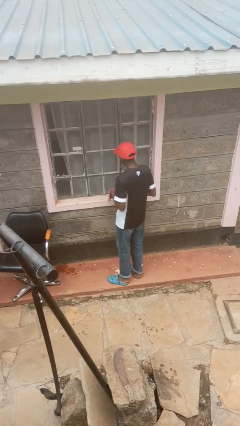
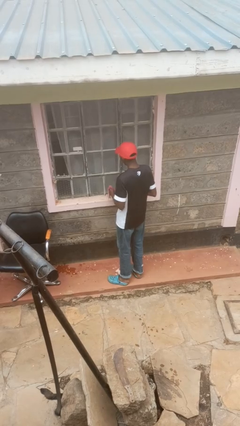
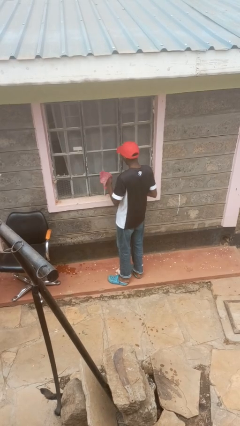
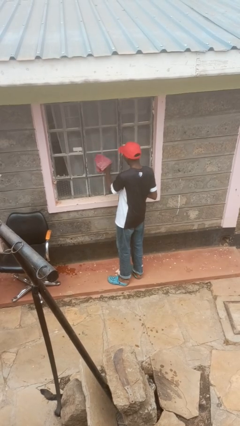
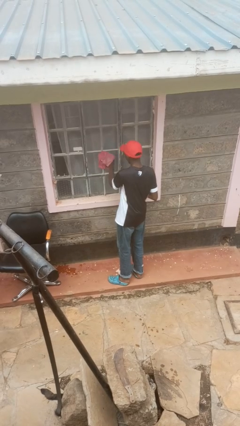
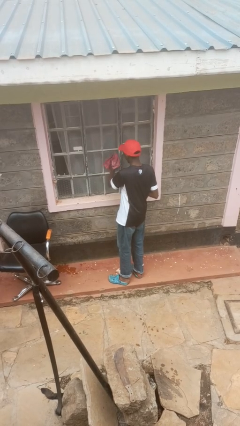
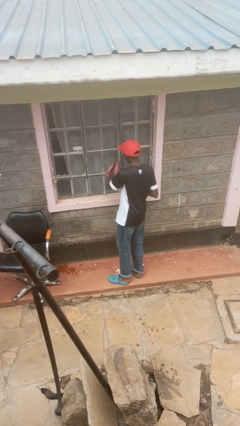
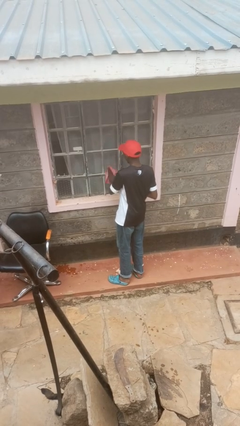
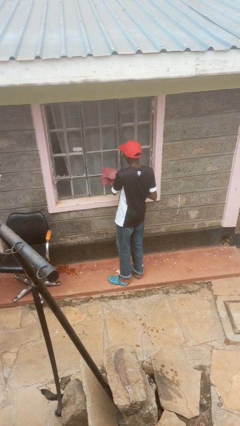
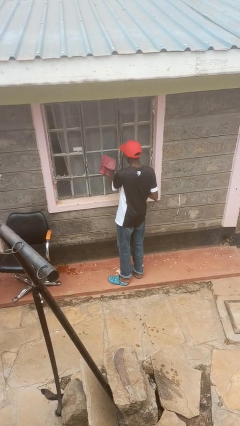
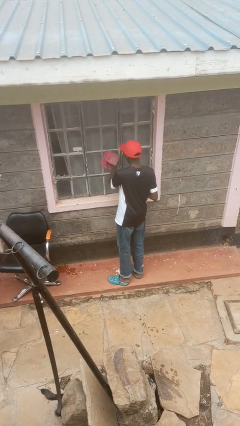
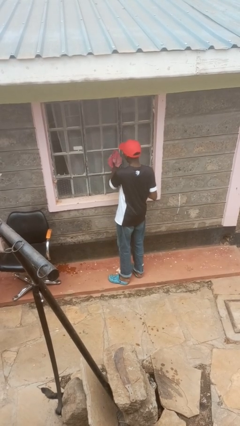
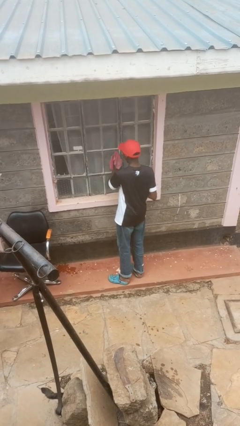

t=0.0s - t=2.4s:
person washes window

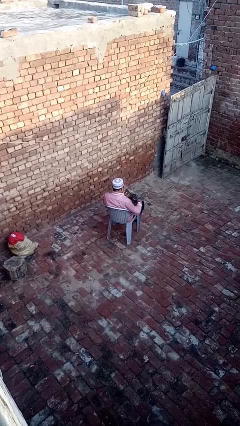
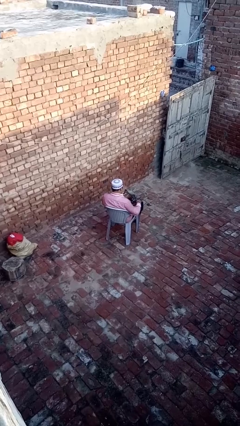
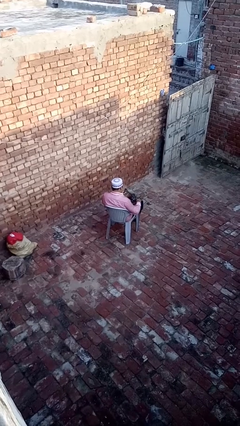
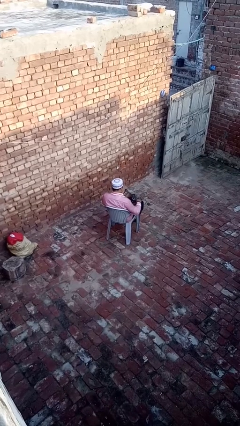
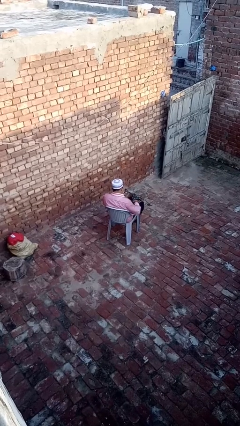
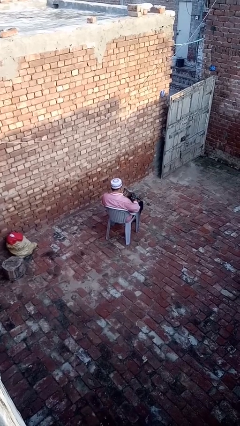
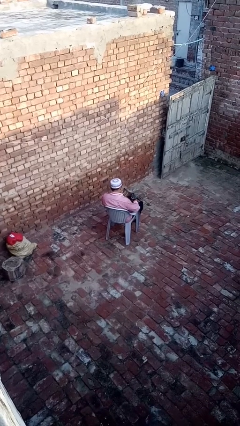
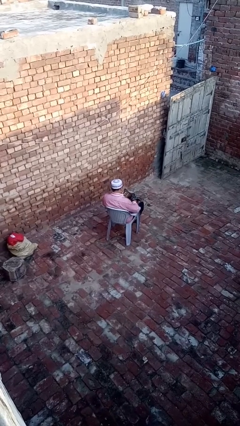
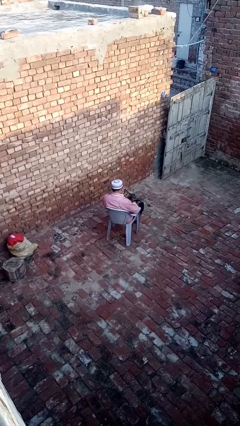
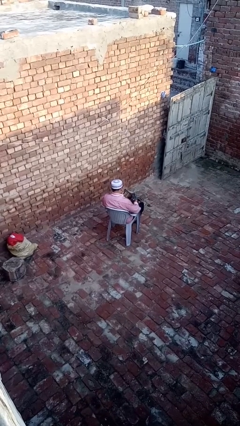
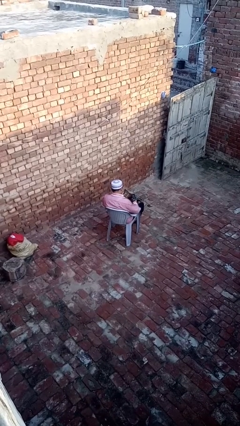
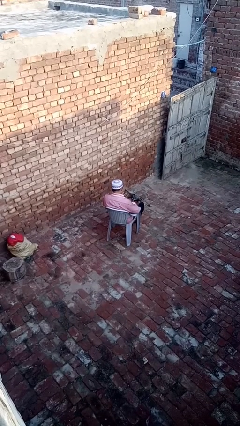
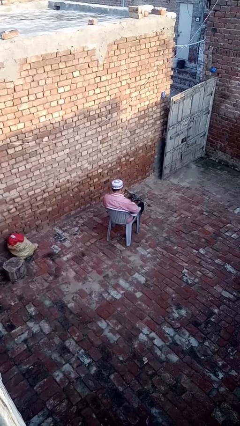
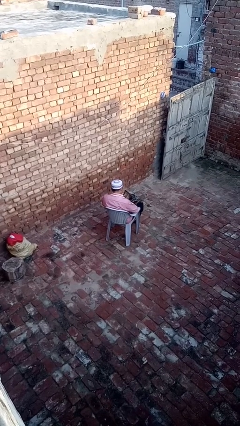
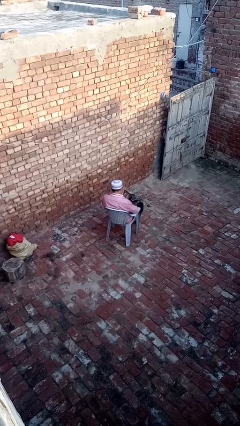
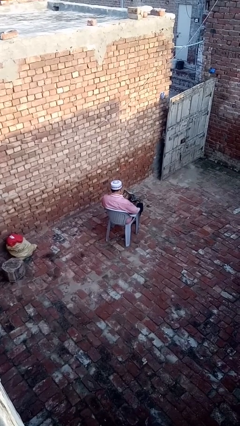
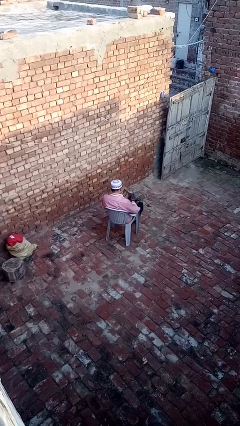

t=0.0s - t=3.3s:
person searches in purse

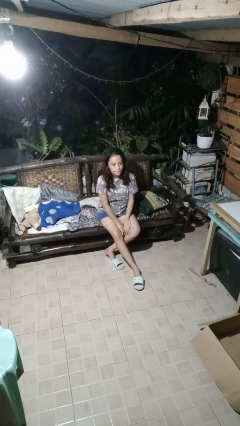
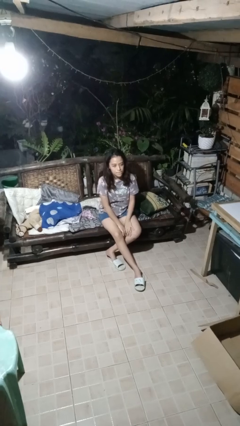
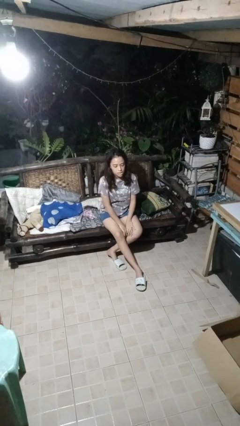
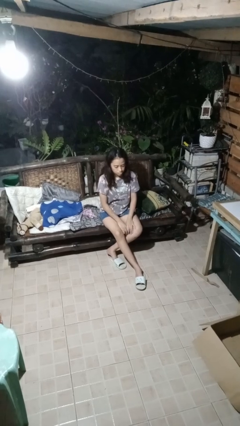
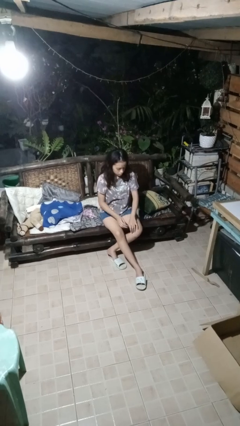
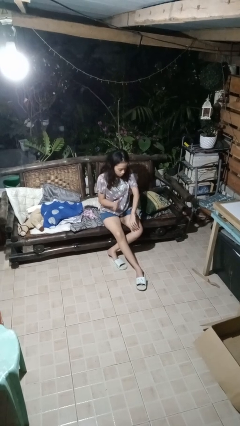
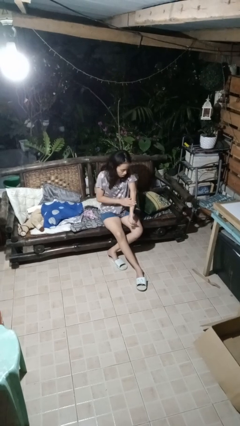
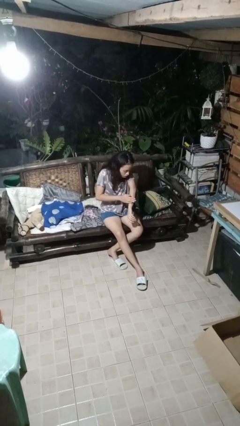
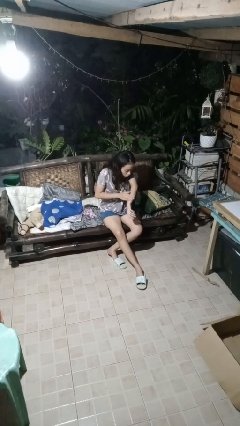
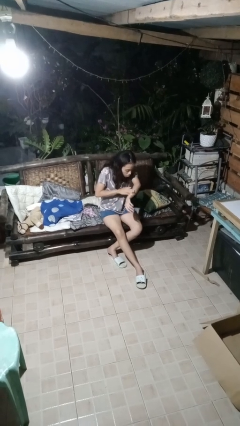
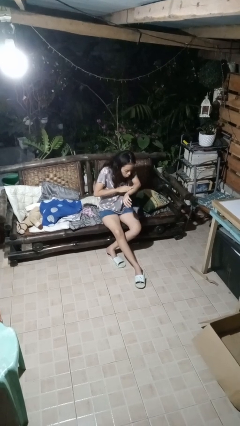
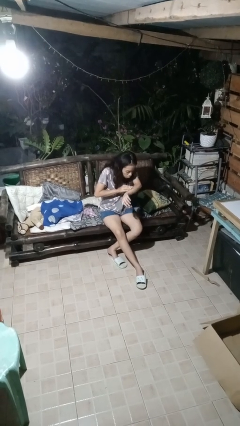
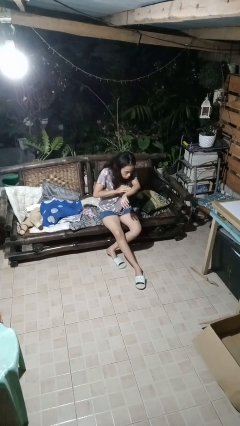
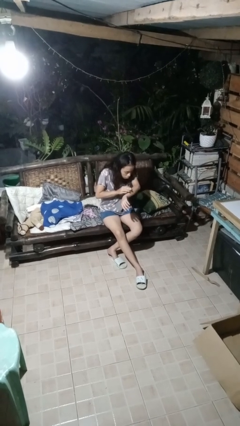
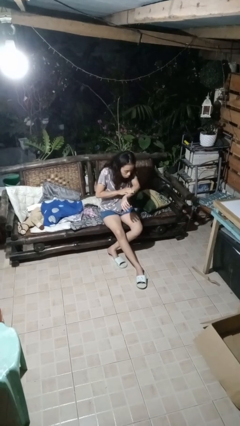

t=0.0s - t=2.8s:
person swats bug

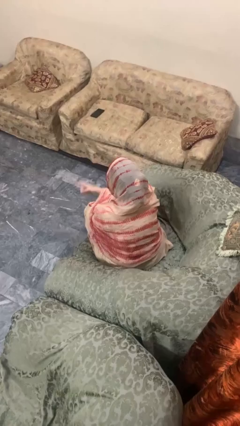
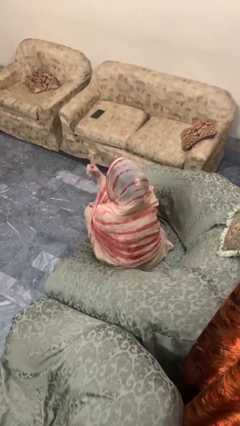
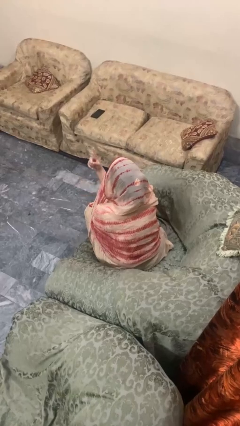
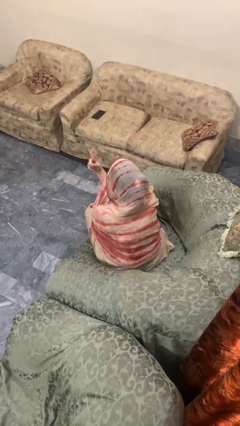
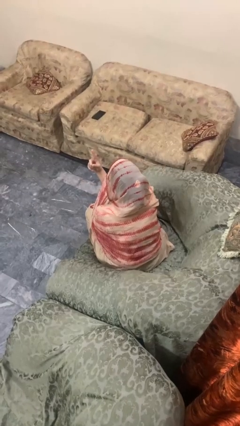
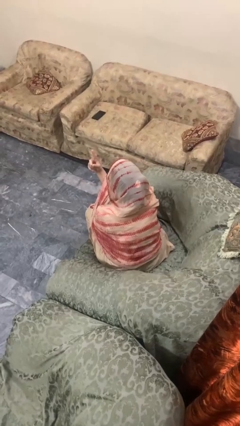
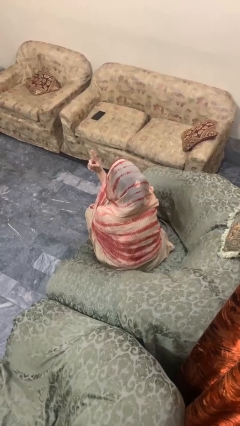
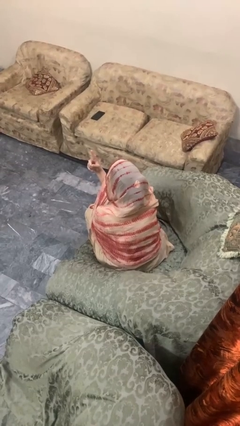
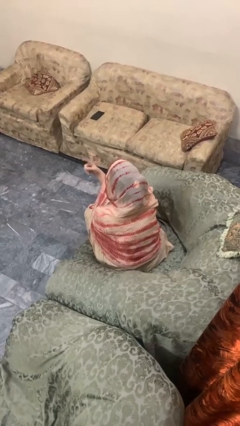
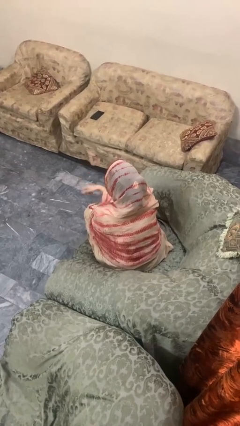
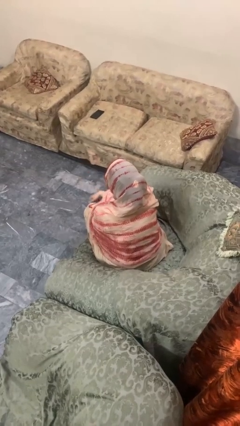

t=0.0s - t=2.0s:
person gestures number one

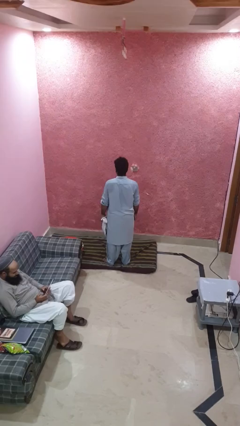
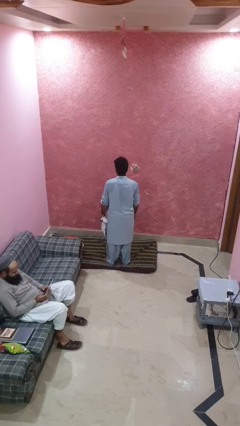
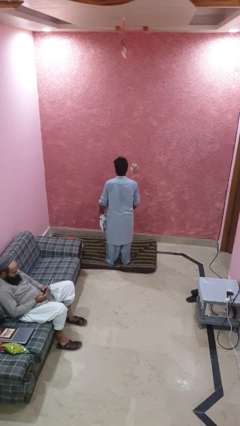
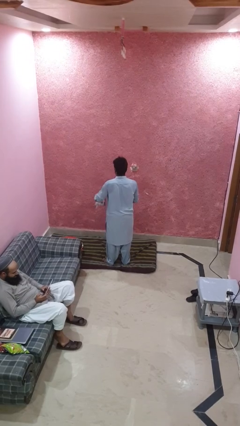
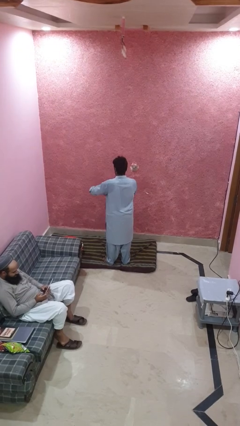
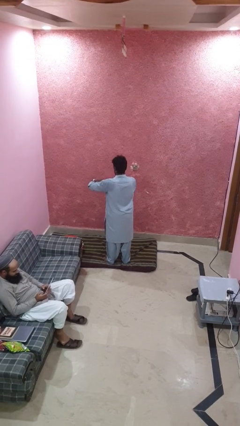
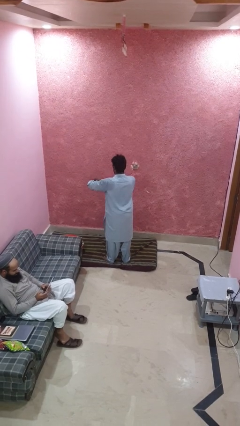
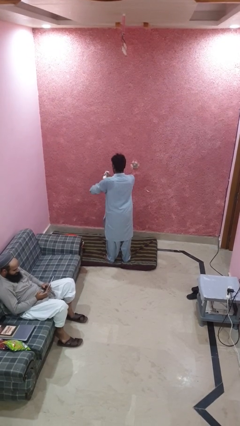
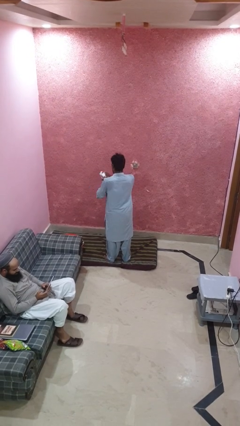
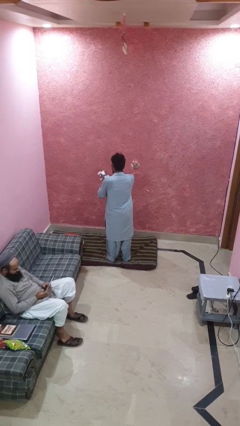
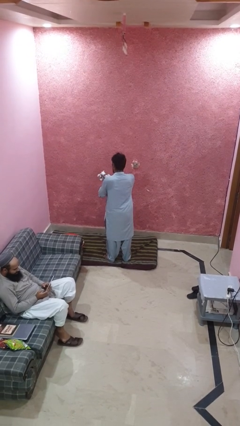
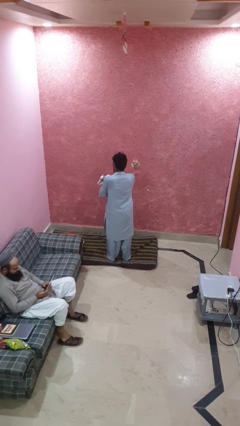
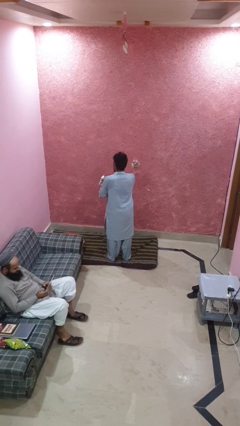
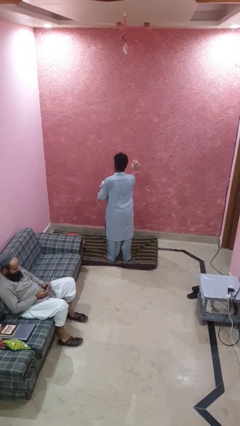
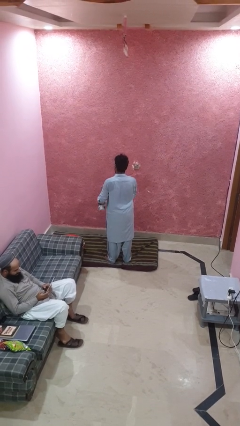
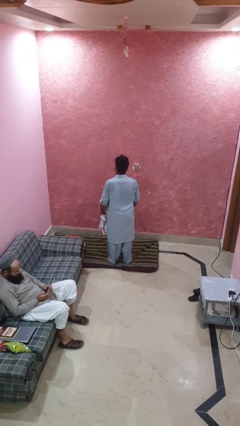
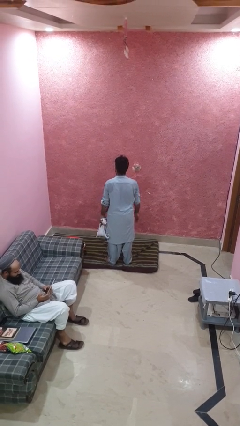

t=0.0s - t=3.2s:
person squeezes object

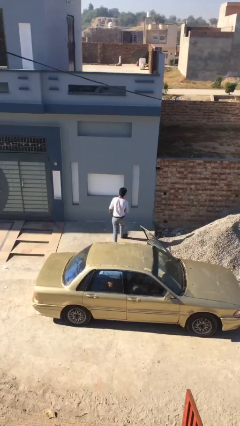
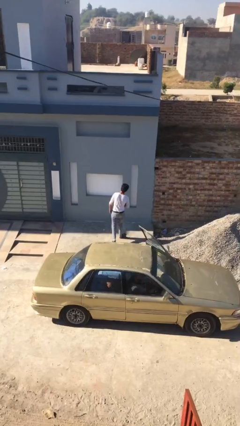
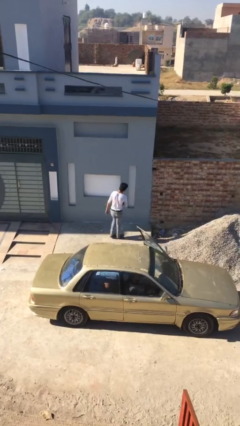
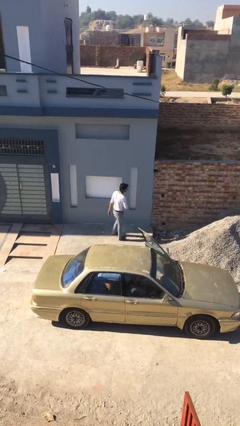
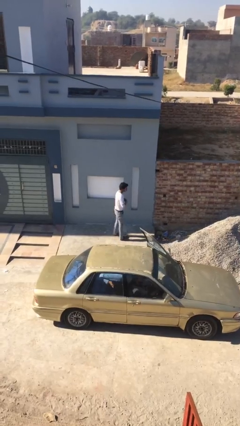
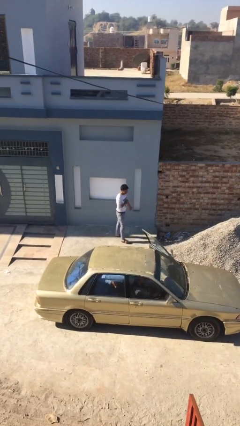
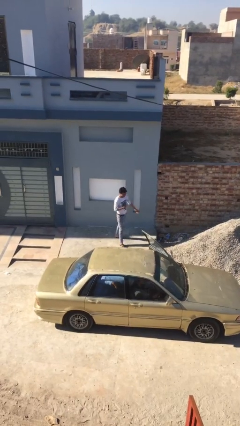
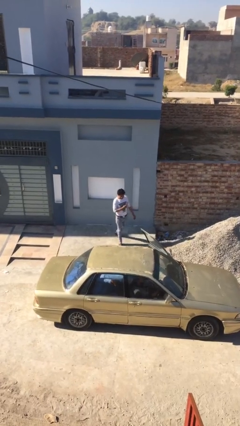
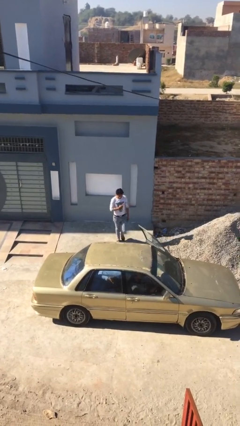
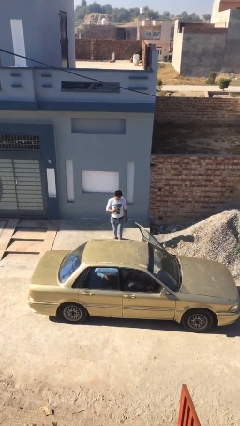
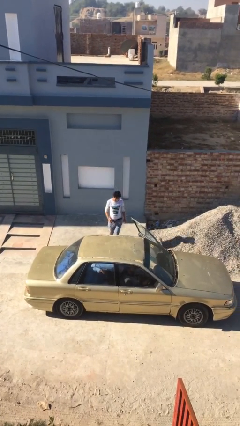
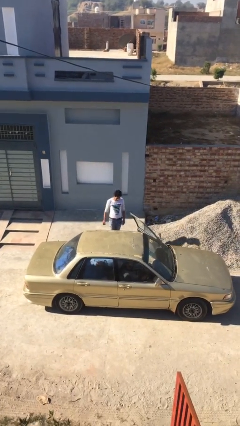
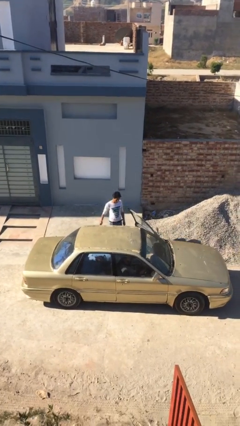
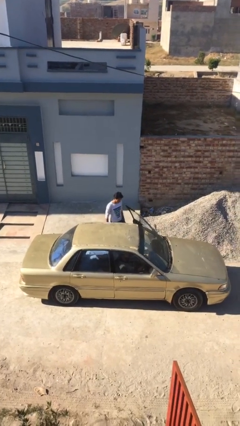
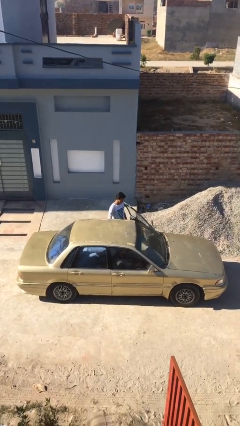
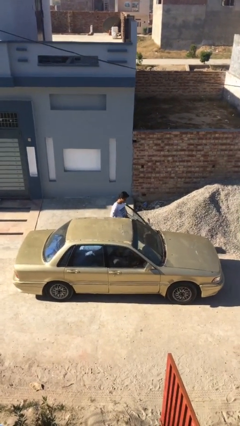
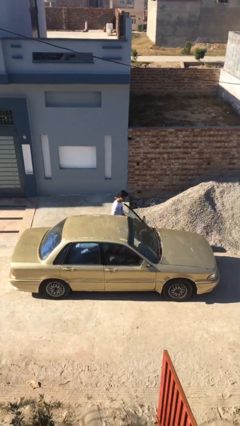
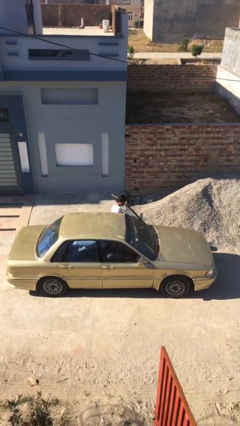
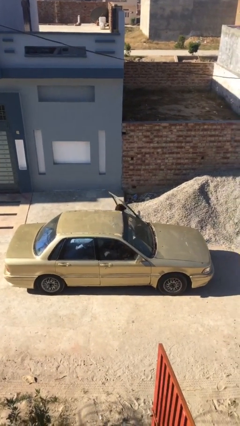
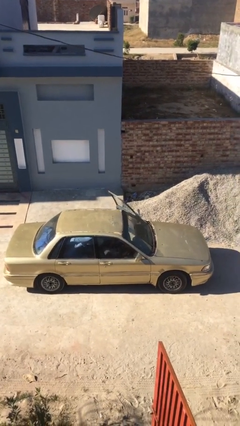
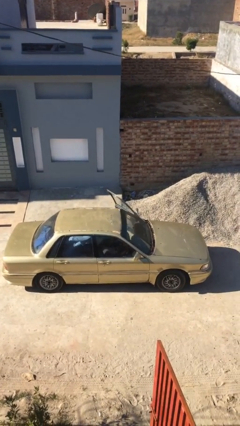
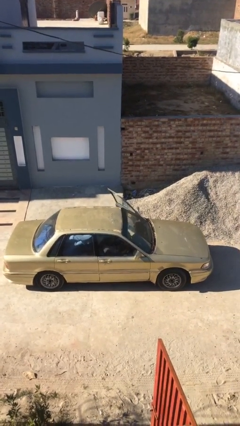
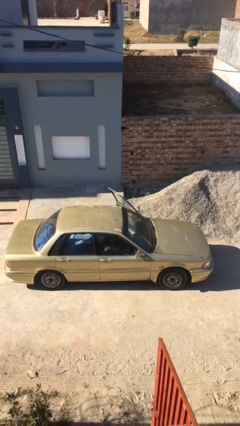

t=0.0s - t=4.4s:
person enters car
